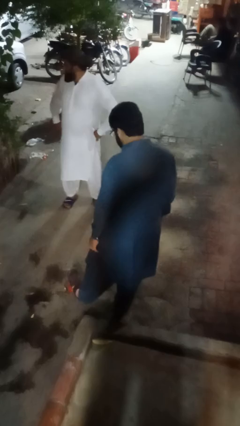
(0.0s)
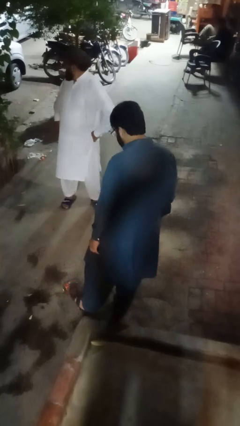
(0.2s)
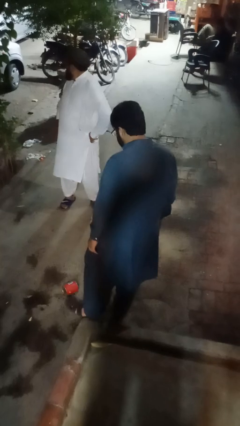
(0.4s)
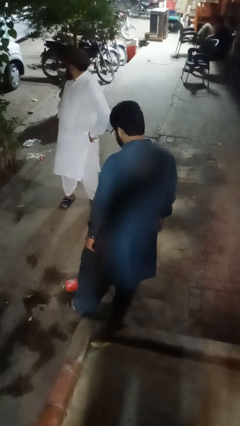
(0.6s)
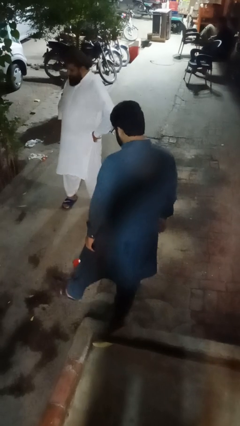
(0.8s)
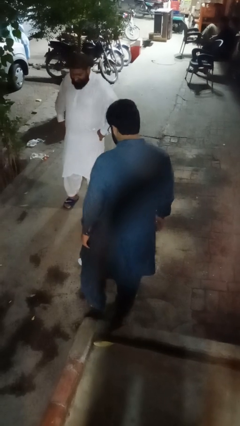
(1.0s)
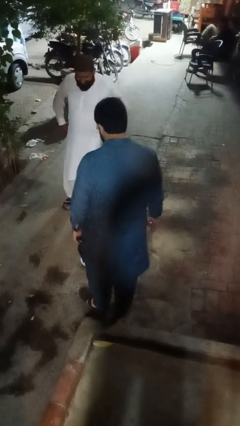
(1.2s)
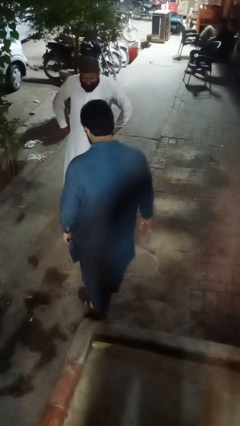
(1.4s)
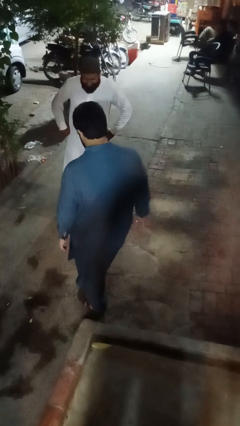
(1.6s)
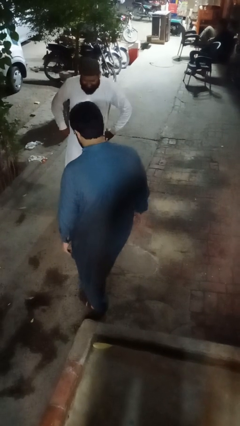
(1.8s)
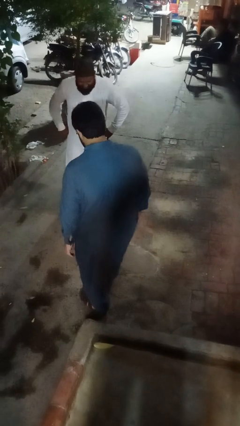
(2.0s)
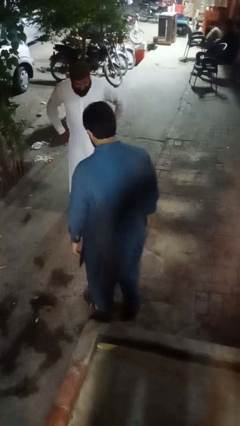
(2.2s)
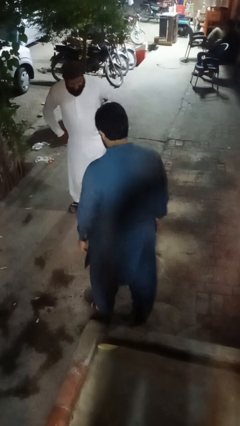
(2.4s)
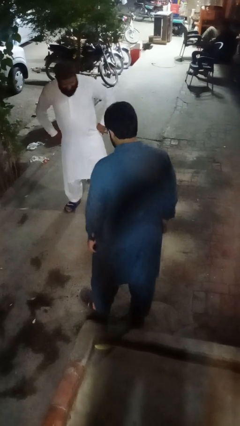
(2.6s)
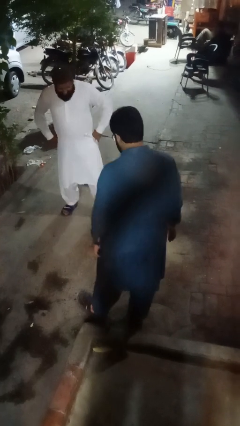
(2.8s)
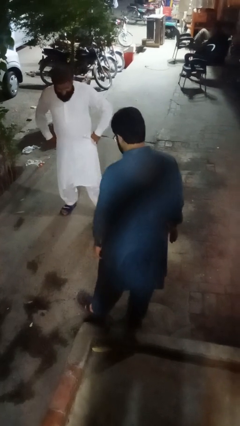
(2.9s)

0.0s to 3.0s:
person kicks object to person

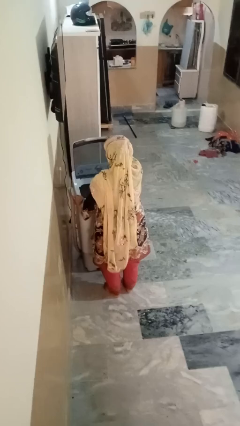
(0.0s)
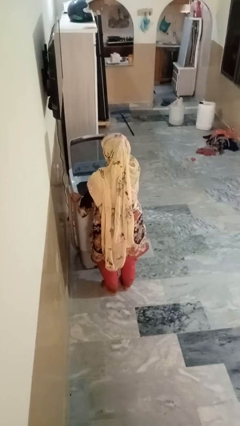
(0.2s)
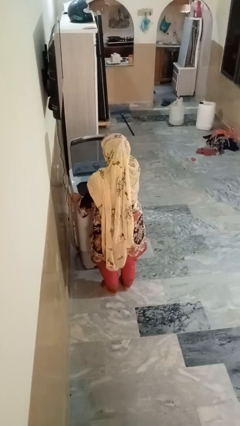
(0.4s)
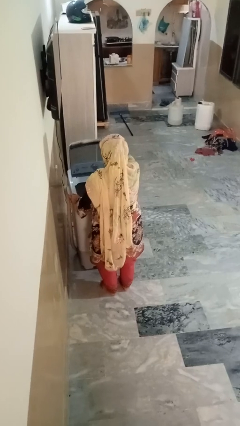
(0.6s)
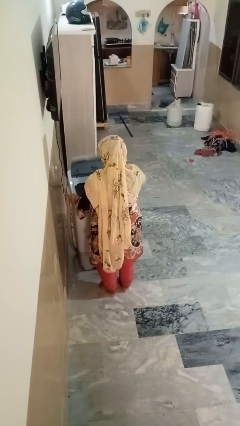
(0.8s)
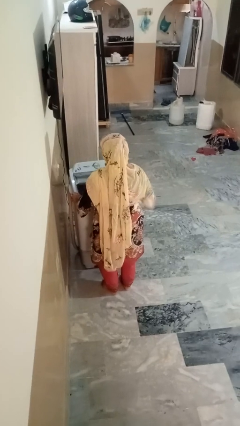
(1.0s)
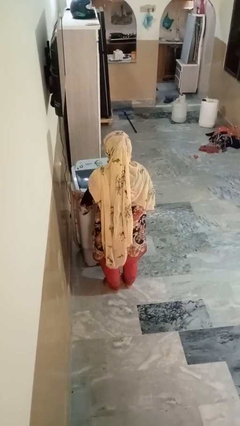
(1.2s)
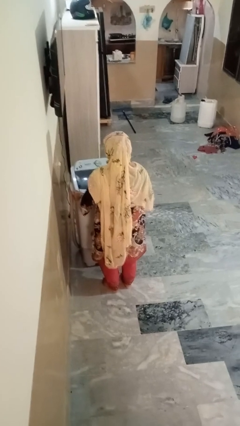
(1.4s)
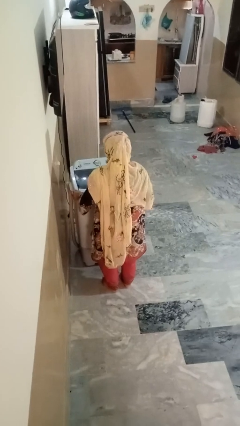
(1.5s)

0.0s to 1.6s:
person closes clothes washer

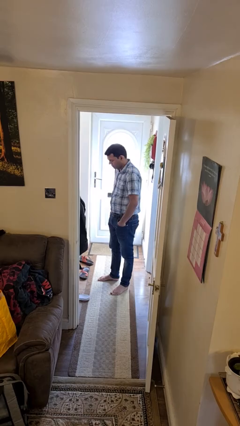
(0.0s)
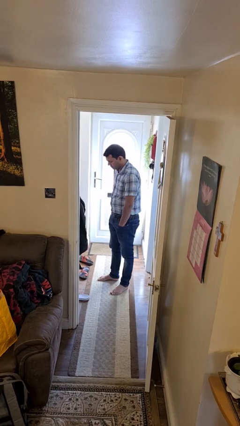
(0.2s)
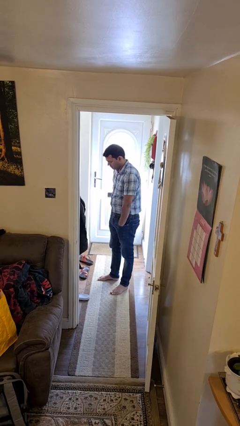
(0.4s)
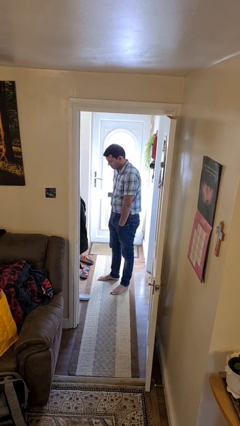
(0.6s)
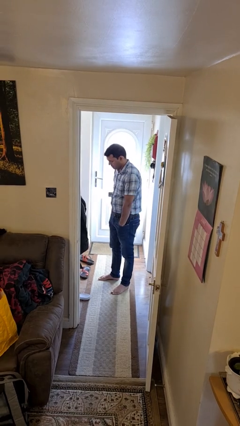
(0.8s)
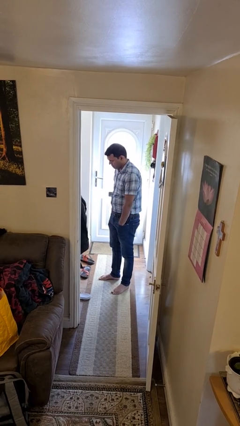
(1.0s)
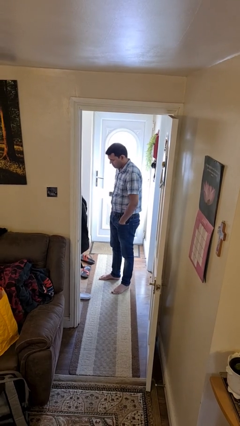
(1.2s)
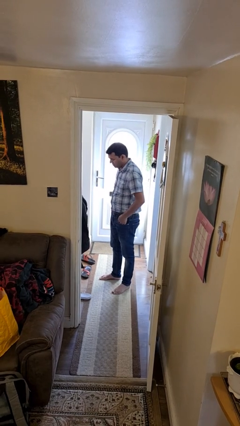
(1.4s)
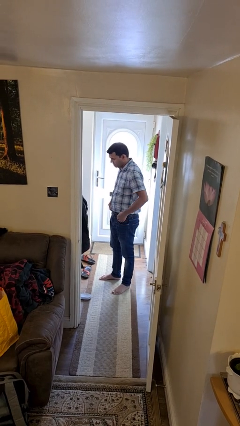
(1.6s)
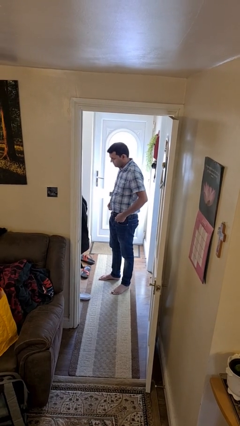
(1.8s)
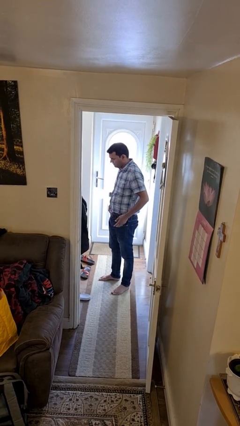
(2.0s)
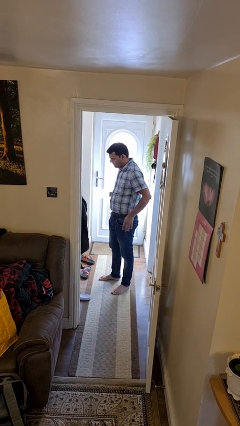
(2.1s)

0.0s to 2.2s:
person puts hands in back pockets

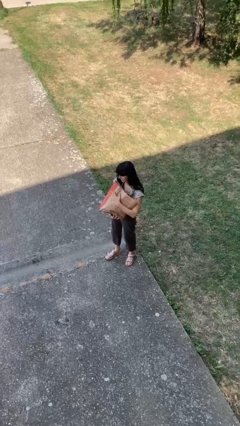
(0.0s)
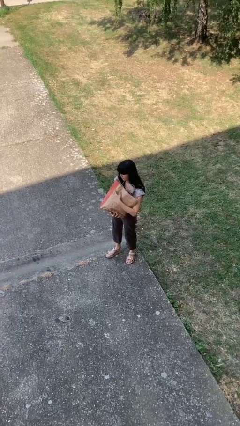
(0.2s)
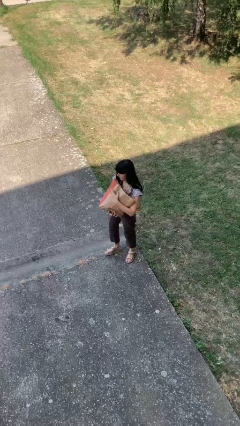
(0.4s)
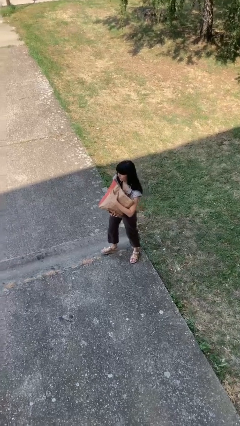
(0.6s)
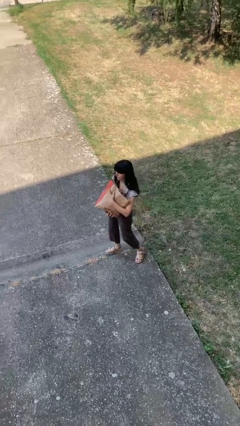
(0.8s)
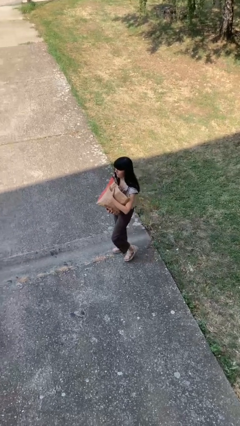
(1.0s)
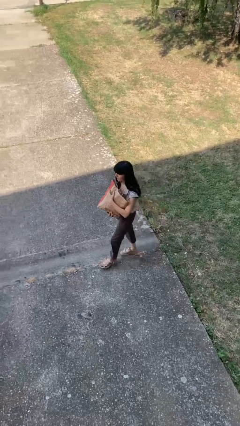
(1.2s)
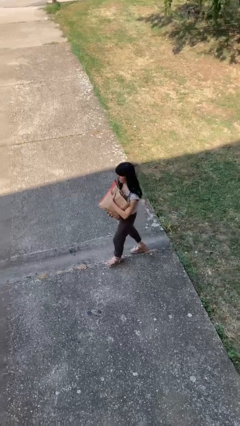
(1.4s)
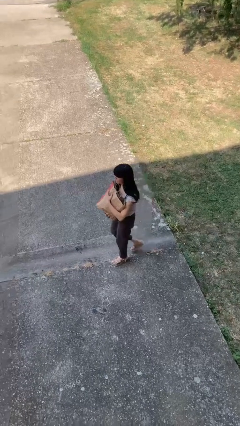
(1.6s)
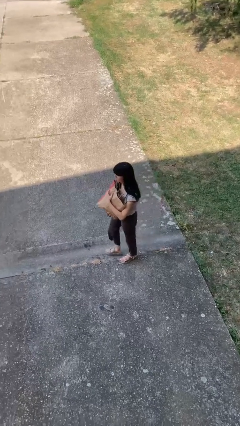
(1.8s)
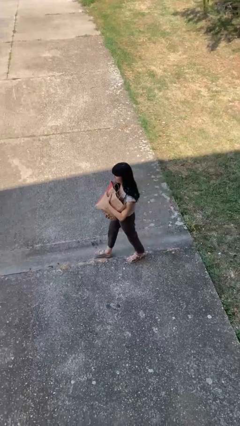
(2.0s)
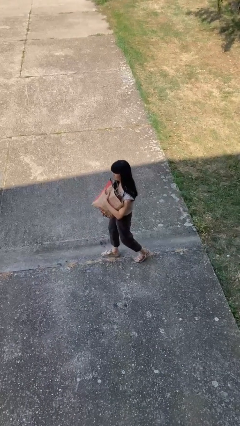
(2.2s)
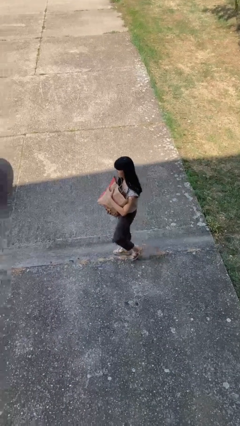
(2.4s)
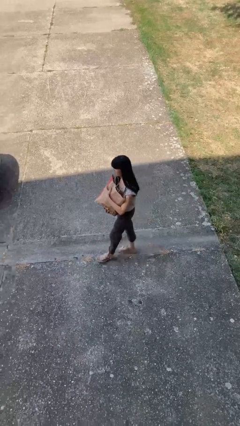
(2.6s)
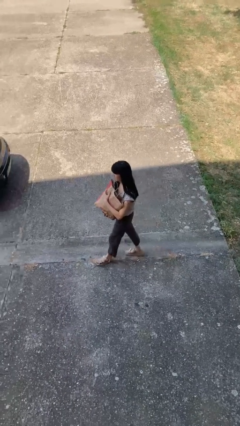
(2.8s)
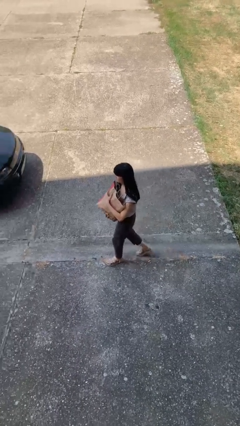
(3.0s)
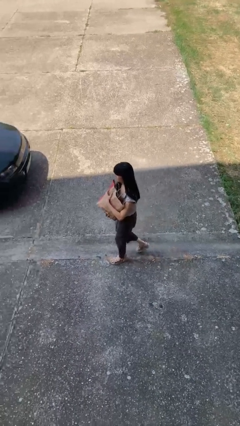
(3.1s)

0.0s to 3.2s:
person carries groceries

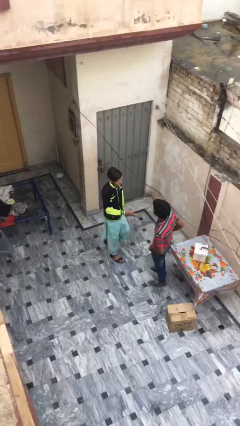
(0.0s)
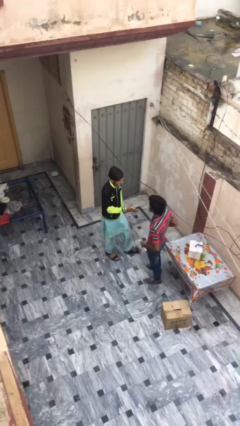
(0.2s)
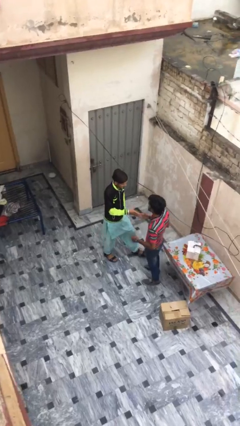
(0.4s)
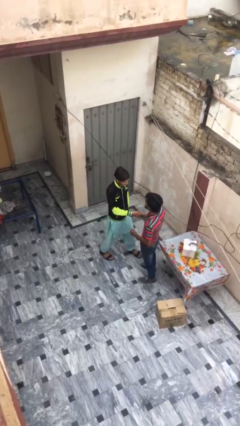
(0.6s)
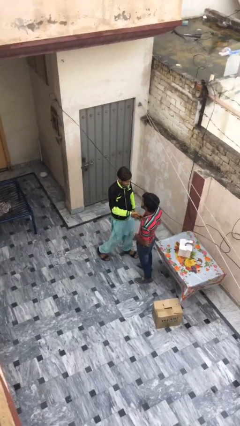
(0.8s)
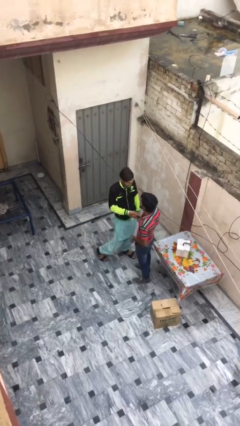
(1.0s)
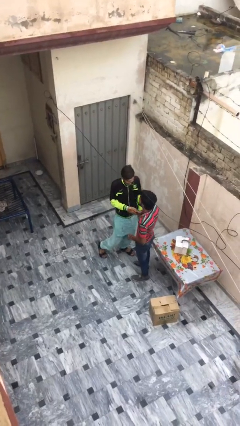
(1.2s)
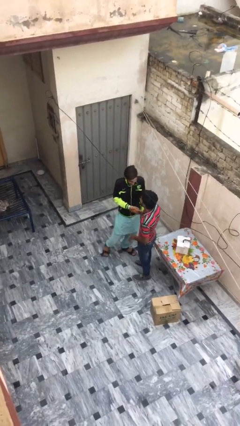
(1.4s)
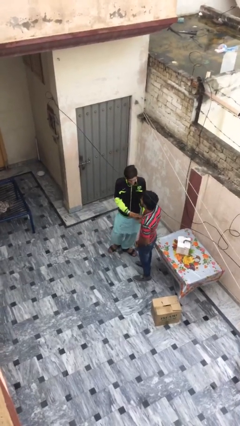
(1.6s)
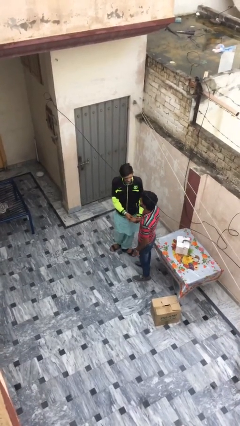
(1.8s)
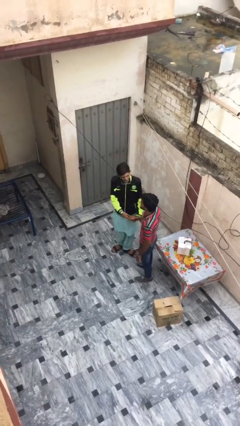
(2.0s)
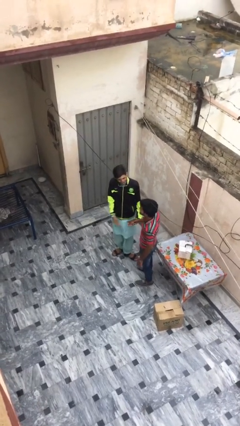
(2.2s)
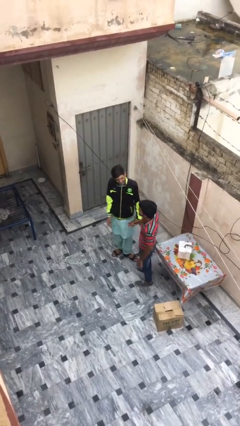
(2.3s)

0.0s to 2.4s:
person shakes hand

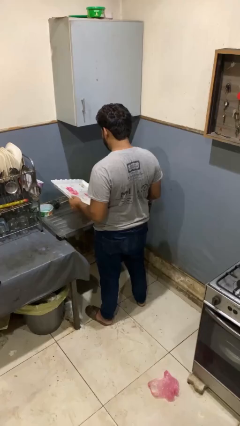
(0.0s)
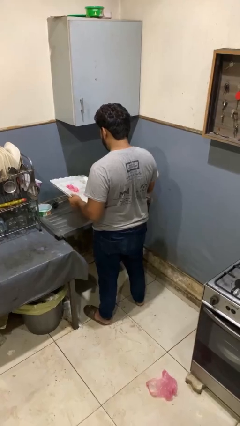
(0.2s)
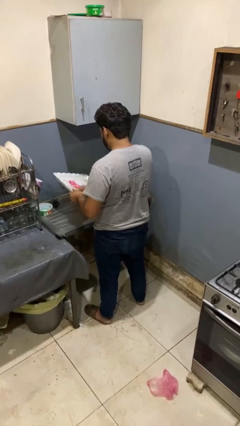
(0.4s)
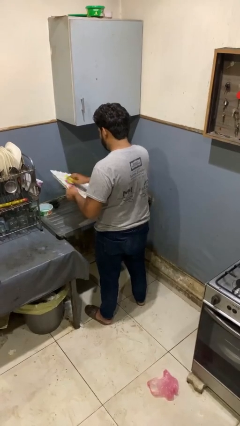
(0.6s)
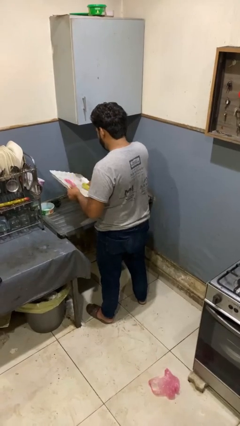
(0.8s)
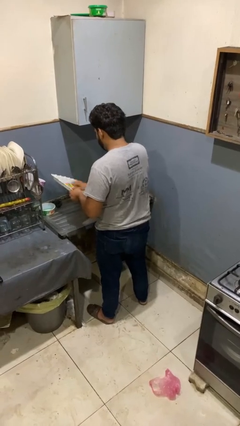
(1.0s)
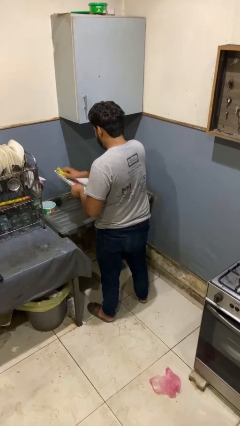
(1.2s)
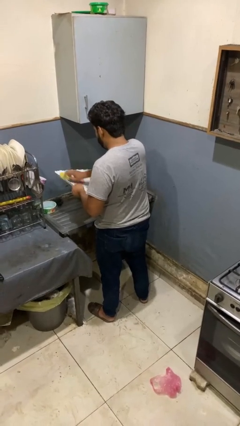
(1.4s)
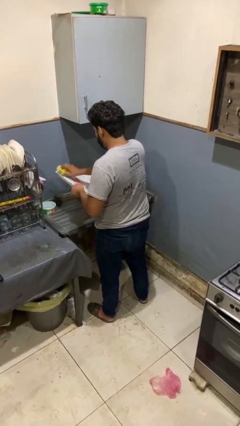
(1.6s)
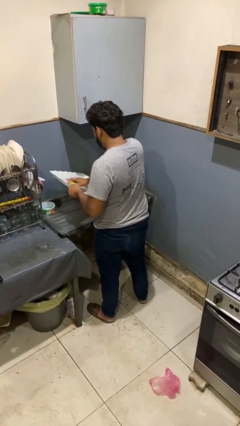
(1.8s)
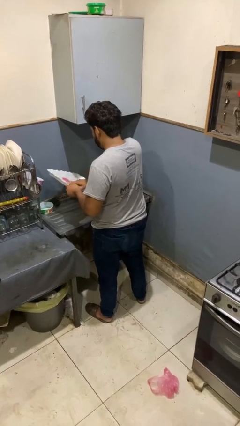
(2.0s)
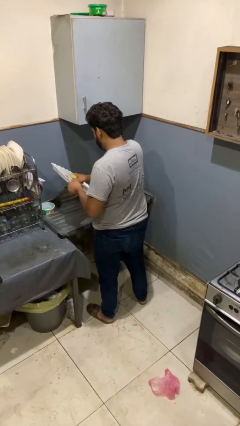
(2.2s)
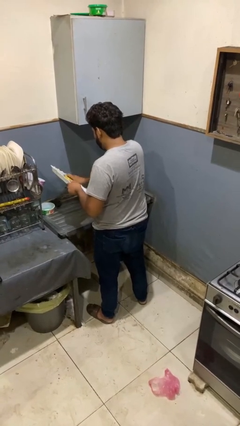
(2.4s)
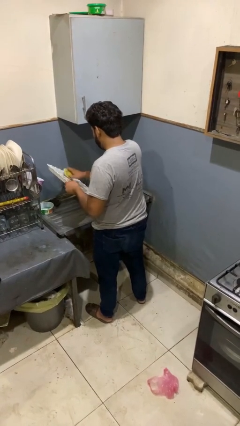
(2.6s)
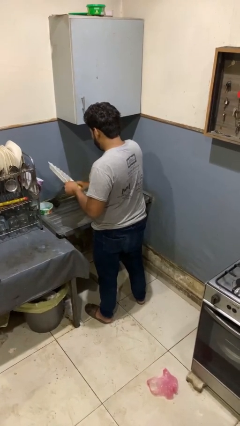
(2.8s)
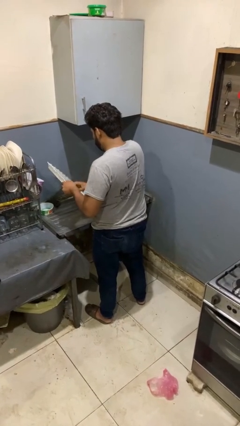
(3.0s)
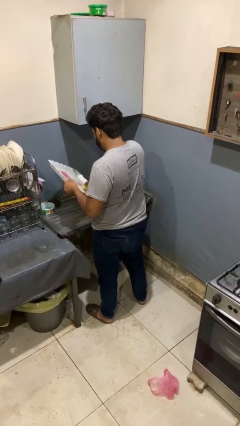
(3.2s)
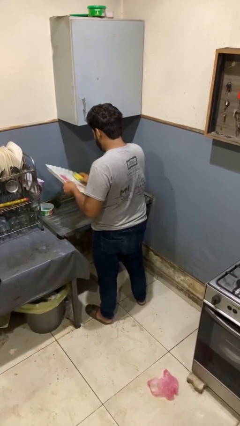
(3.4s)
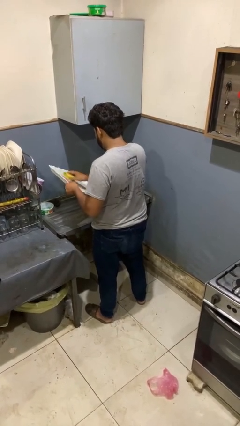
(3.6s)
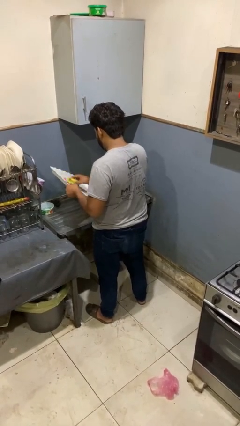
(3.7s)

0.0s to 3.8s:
person washes dish

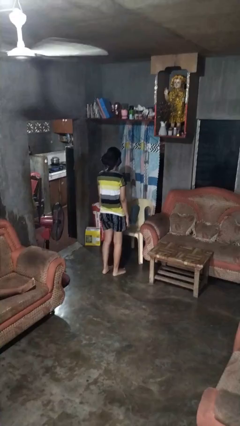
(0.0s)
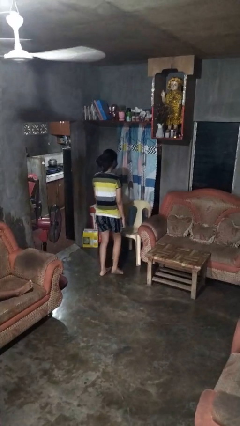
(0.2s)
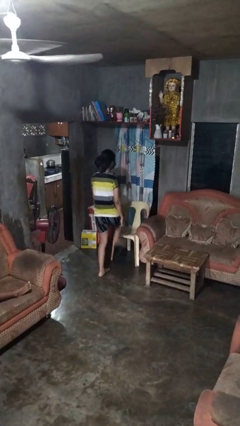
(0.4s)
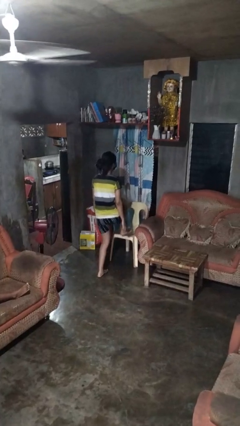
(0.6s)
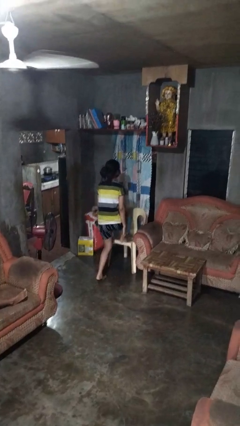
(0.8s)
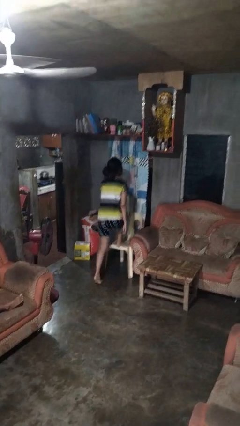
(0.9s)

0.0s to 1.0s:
person climbs on chair
